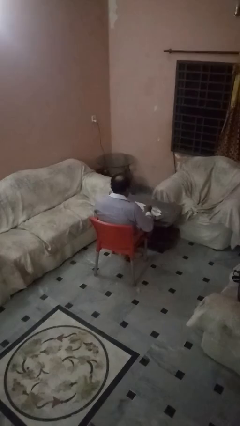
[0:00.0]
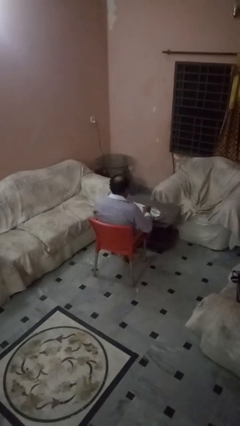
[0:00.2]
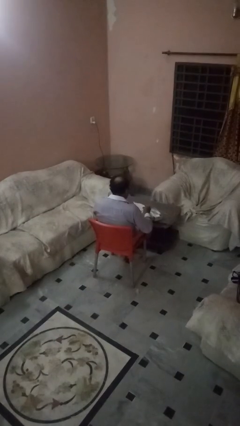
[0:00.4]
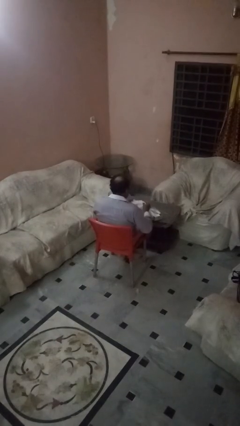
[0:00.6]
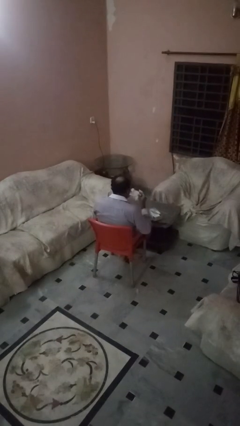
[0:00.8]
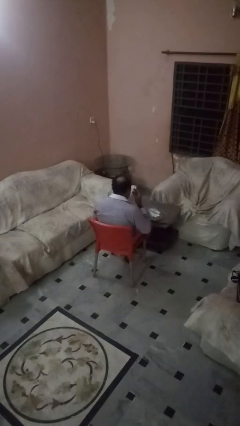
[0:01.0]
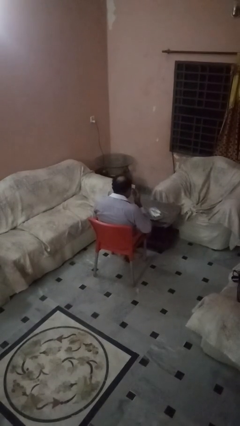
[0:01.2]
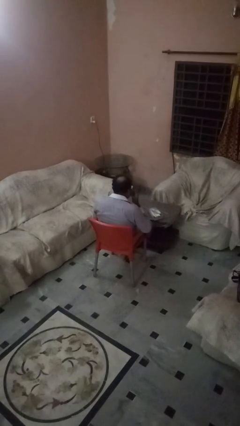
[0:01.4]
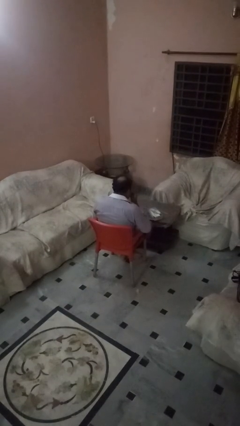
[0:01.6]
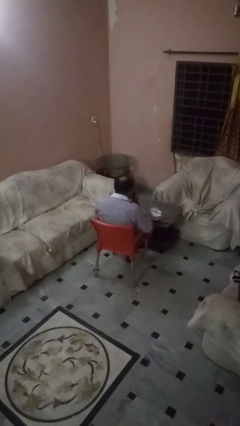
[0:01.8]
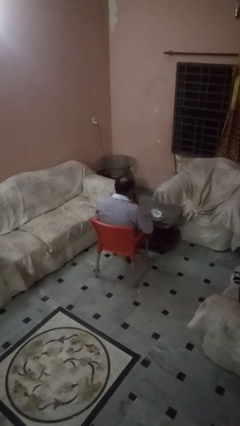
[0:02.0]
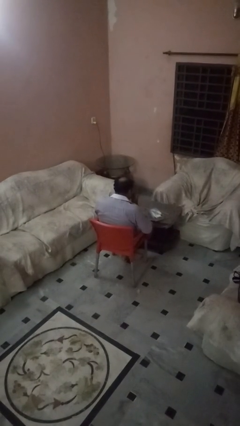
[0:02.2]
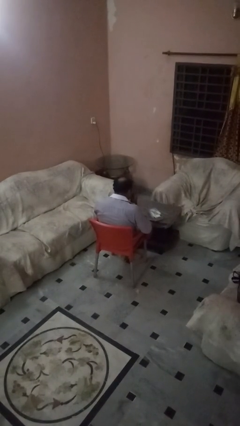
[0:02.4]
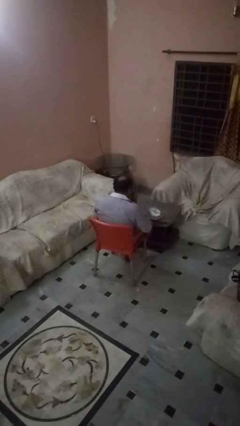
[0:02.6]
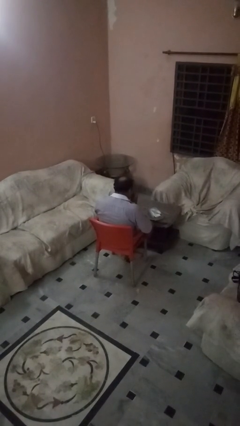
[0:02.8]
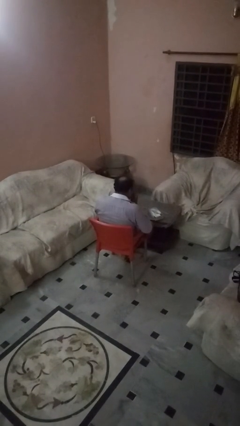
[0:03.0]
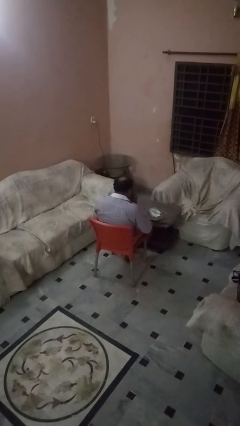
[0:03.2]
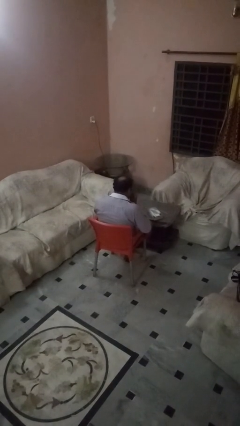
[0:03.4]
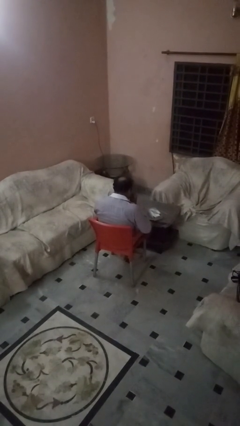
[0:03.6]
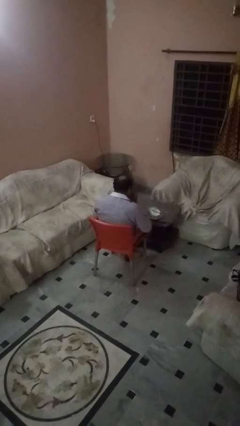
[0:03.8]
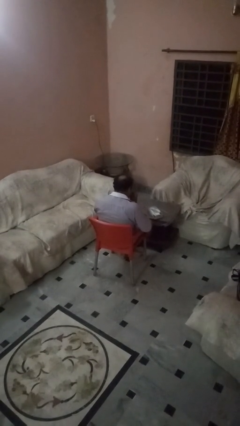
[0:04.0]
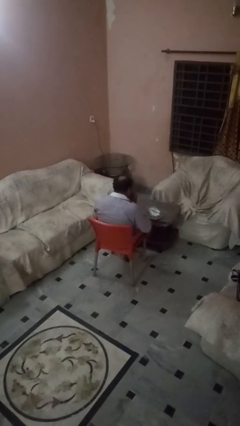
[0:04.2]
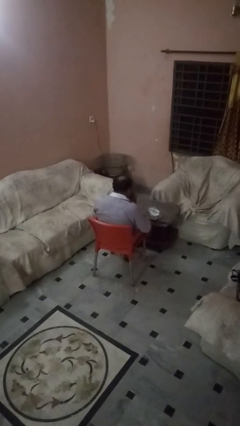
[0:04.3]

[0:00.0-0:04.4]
person blows nose

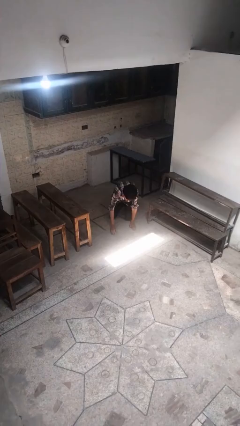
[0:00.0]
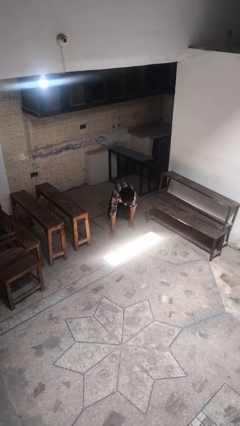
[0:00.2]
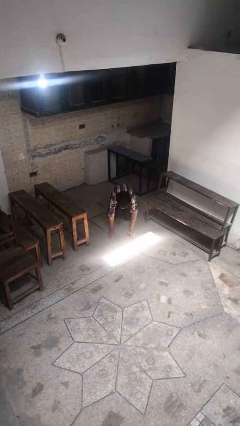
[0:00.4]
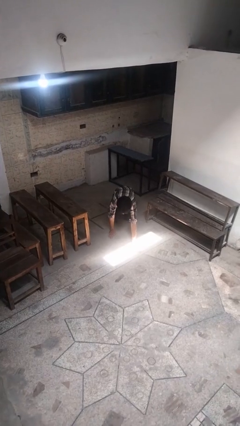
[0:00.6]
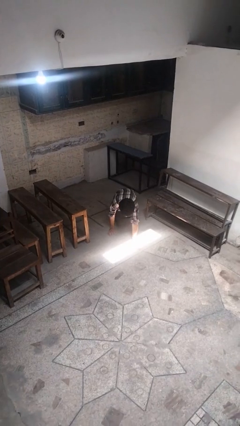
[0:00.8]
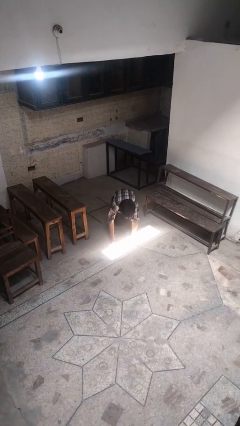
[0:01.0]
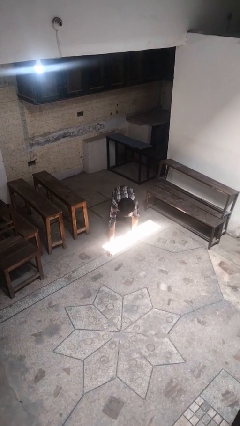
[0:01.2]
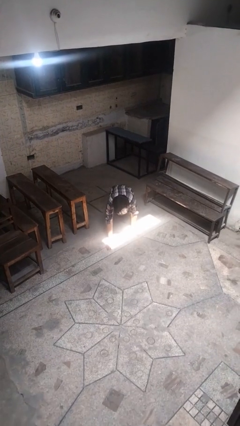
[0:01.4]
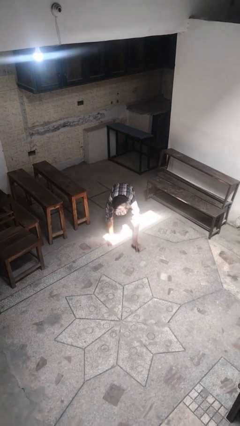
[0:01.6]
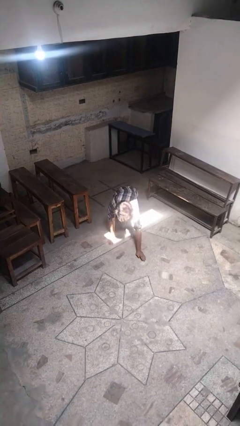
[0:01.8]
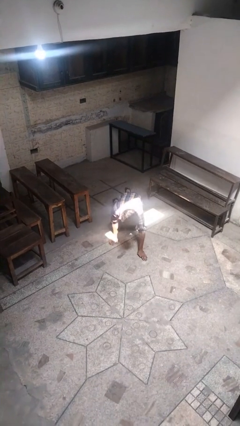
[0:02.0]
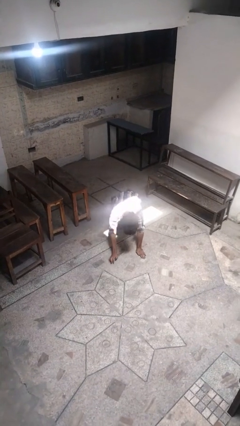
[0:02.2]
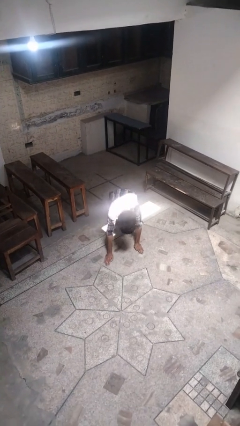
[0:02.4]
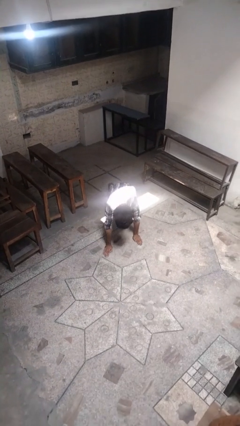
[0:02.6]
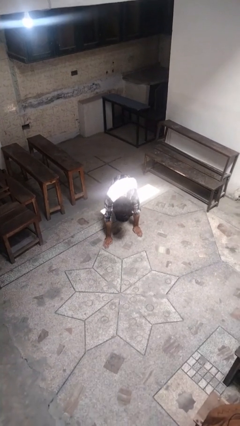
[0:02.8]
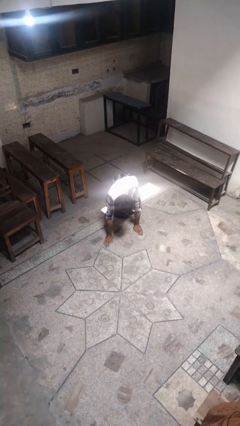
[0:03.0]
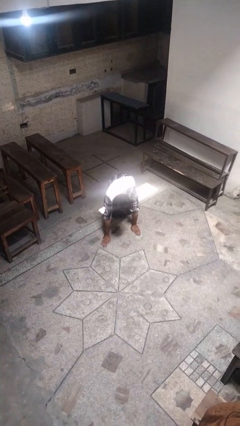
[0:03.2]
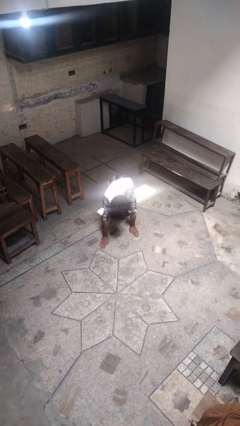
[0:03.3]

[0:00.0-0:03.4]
person crawls

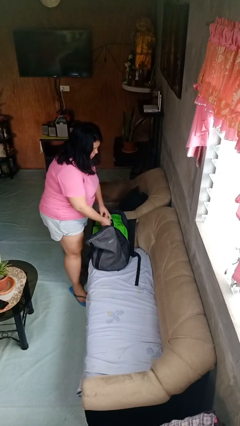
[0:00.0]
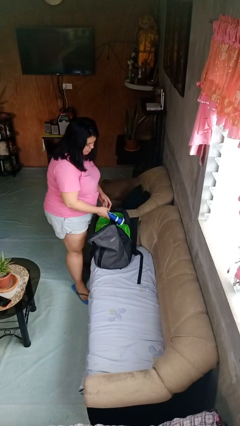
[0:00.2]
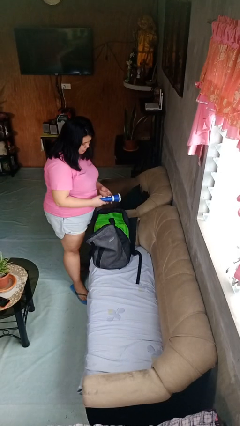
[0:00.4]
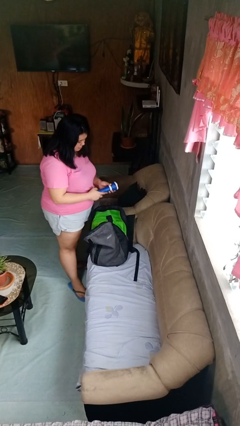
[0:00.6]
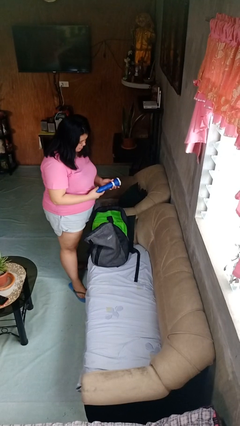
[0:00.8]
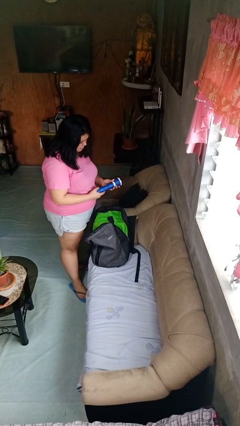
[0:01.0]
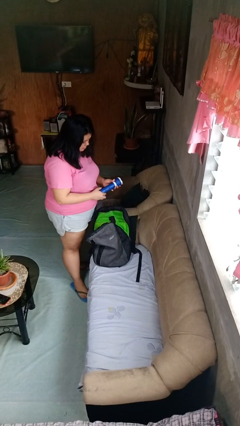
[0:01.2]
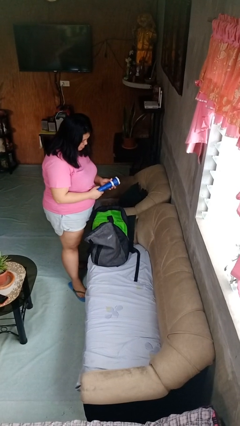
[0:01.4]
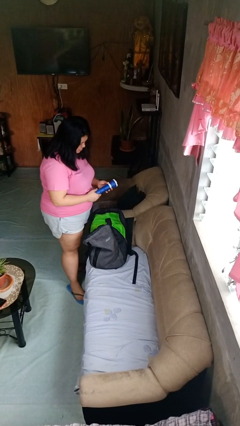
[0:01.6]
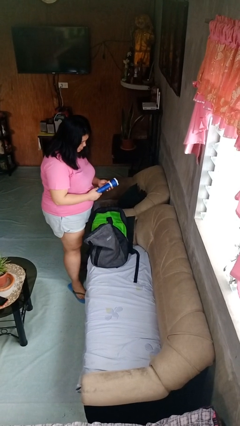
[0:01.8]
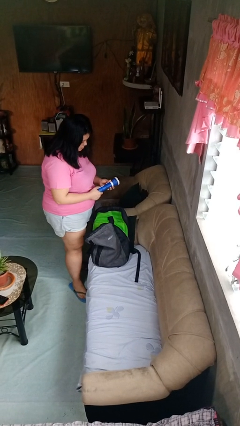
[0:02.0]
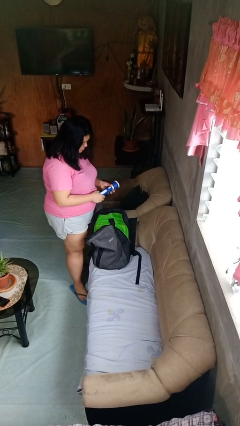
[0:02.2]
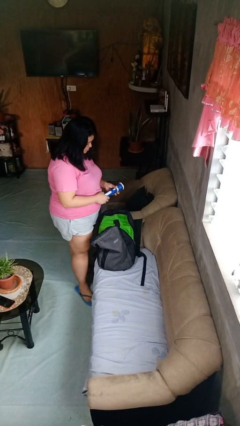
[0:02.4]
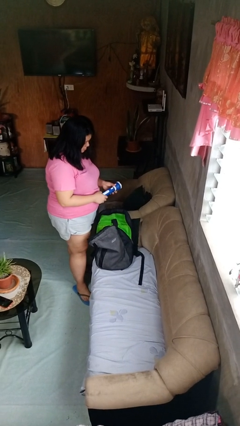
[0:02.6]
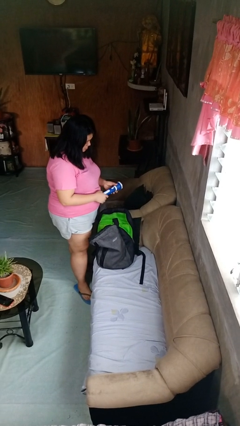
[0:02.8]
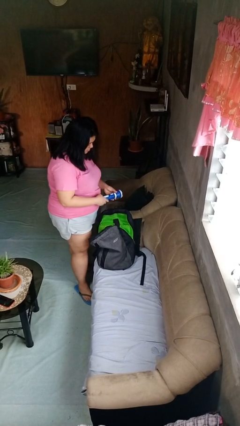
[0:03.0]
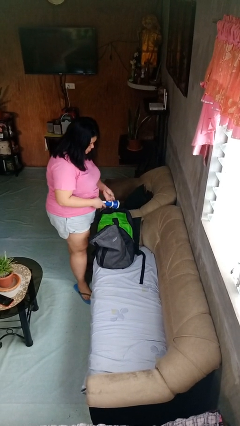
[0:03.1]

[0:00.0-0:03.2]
person takes object from backpack

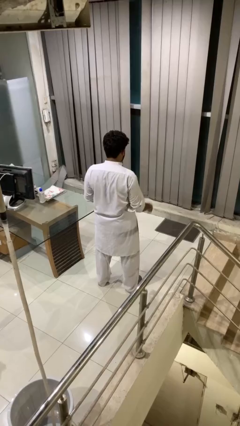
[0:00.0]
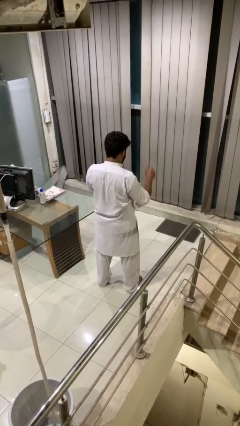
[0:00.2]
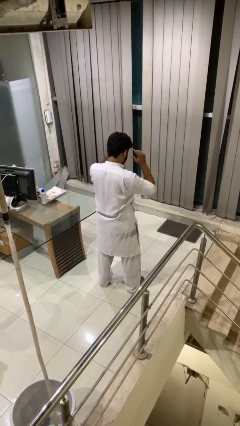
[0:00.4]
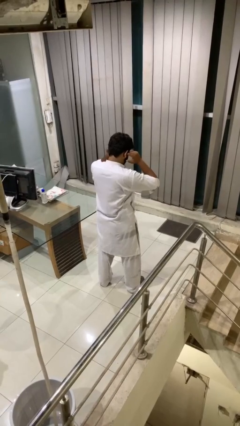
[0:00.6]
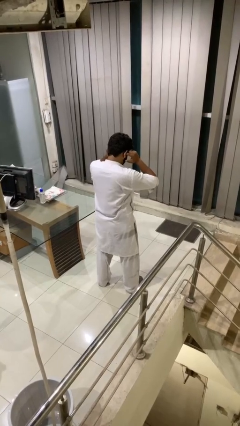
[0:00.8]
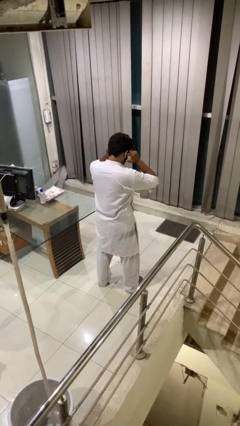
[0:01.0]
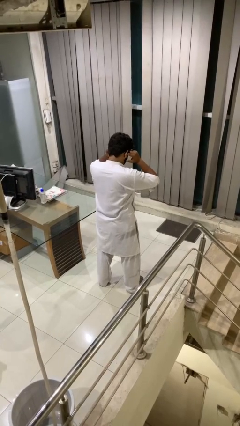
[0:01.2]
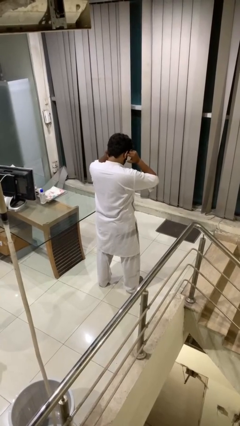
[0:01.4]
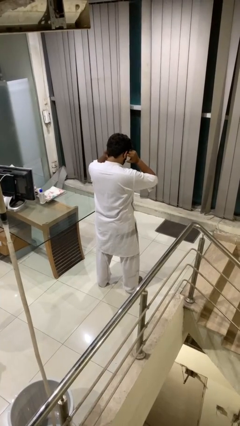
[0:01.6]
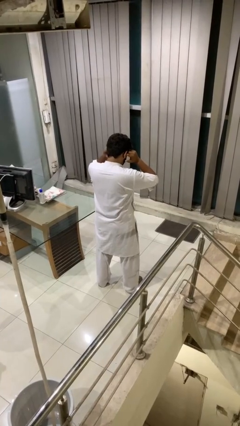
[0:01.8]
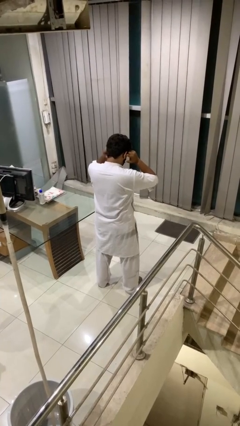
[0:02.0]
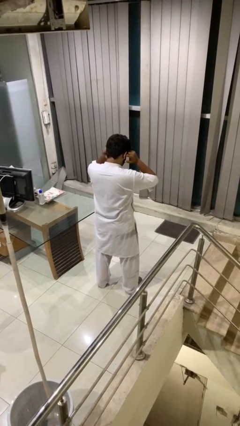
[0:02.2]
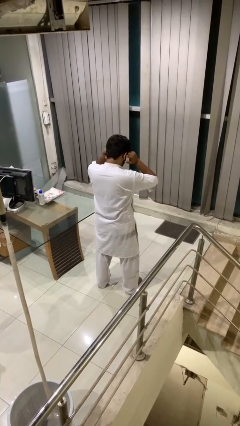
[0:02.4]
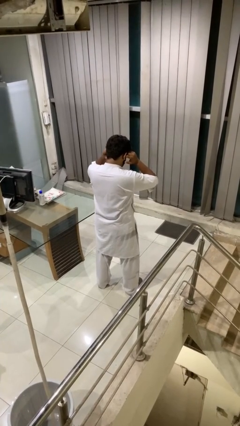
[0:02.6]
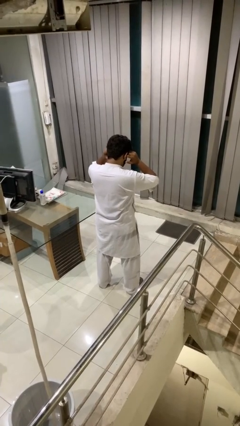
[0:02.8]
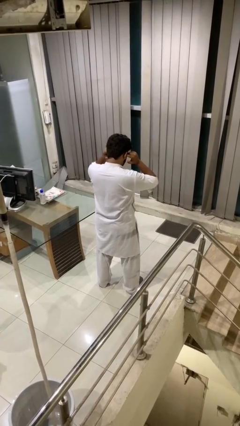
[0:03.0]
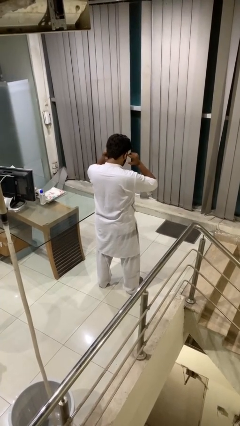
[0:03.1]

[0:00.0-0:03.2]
person puts fingers in ear

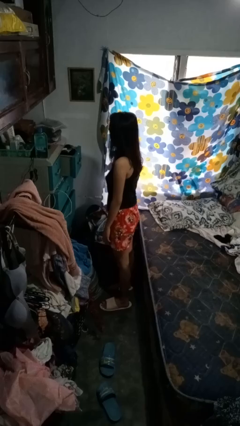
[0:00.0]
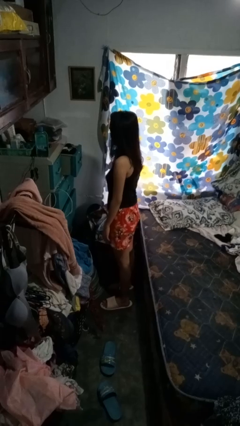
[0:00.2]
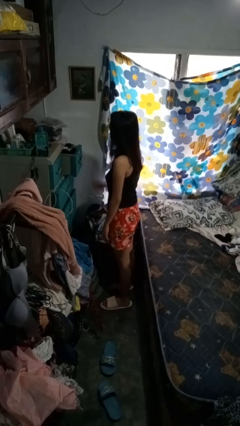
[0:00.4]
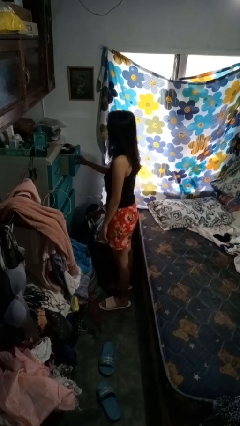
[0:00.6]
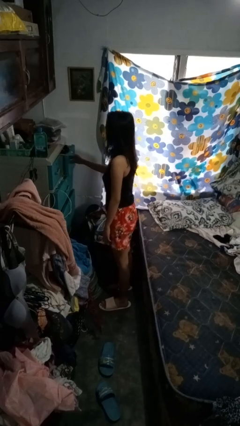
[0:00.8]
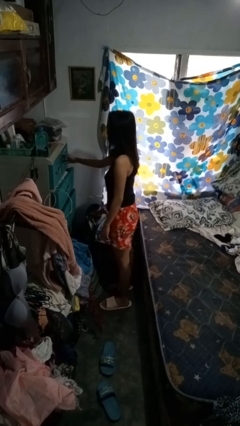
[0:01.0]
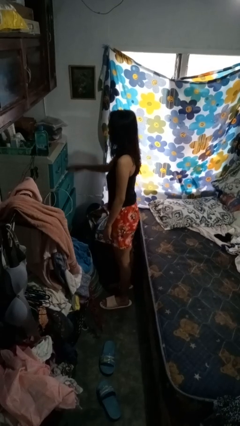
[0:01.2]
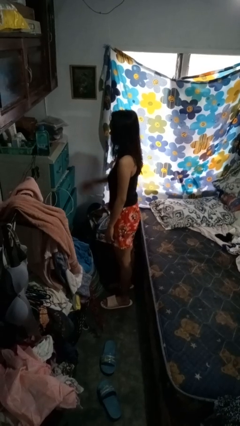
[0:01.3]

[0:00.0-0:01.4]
person closes dresser drawer

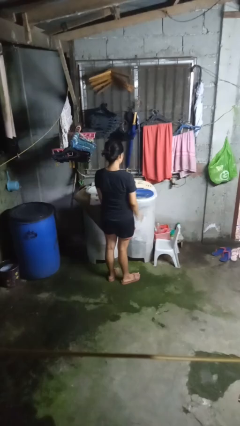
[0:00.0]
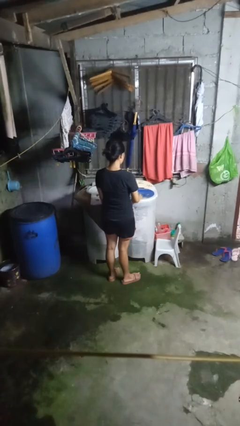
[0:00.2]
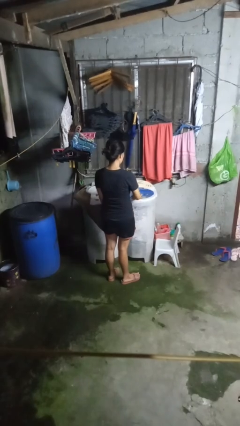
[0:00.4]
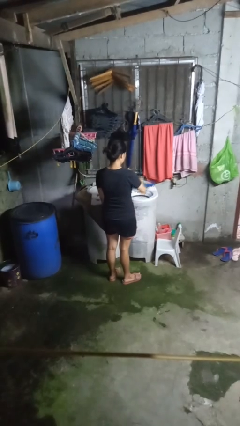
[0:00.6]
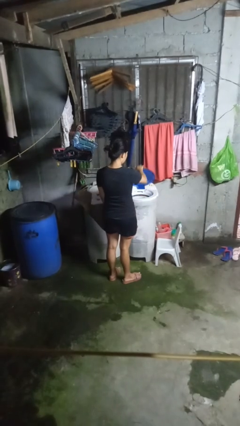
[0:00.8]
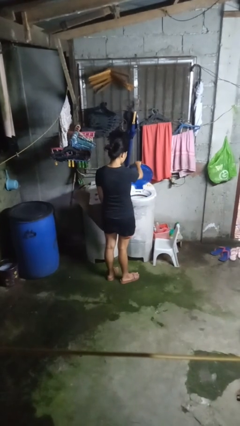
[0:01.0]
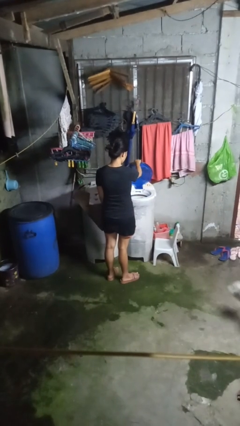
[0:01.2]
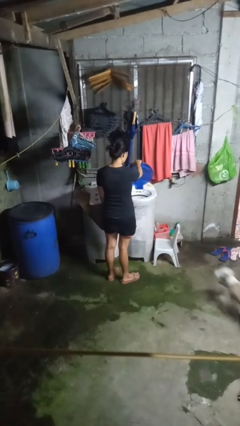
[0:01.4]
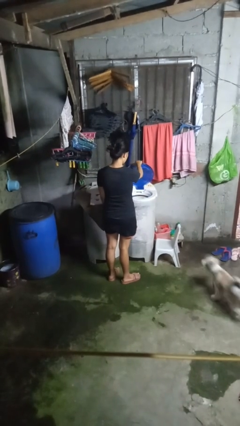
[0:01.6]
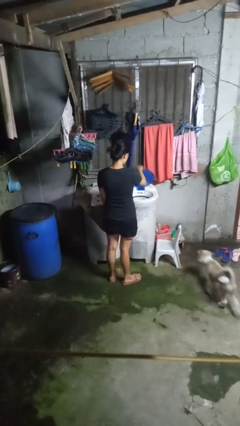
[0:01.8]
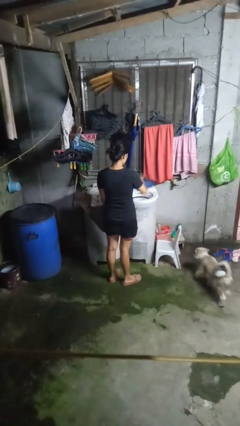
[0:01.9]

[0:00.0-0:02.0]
person opens clothes washer
